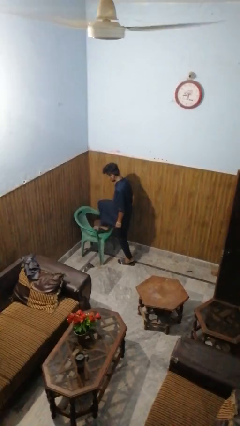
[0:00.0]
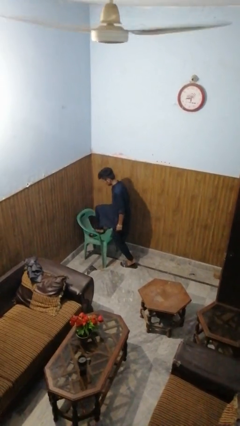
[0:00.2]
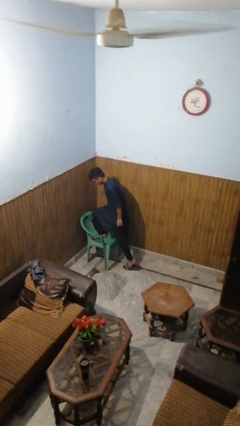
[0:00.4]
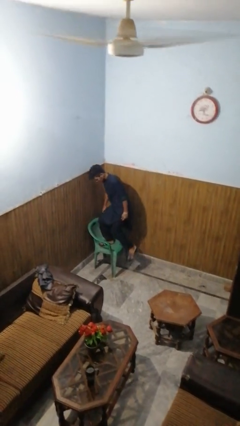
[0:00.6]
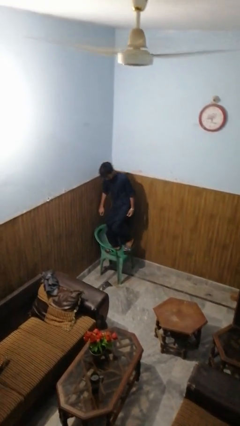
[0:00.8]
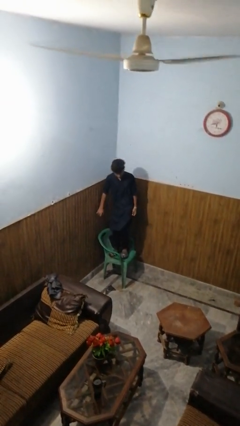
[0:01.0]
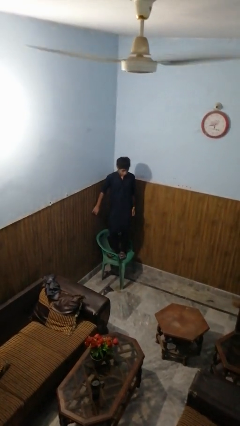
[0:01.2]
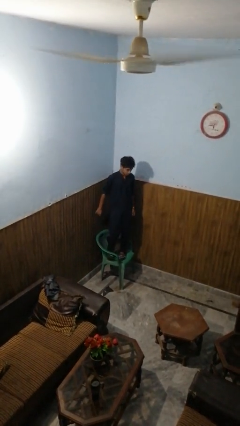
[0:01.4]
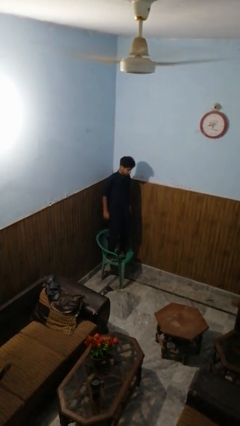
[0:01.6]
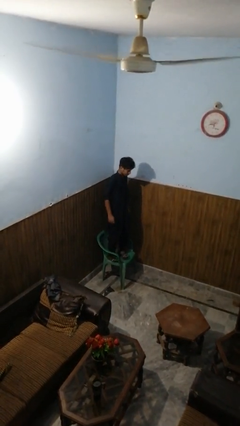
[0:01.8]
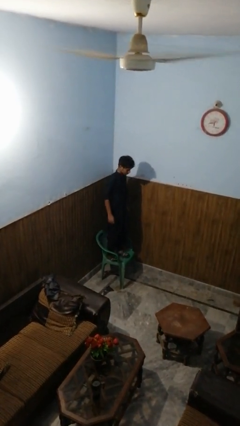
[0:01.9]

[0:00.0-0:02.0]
person climbs on chair

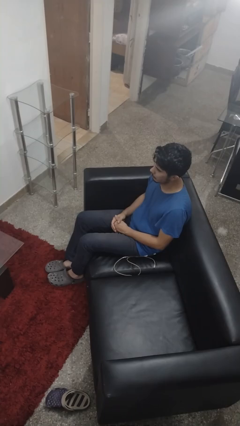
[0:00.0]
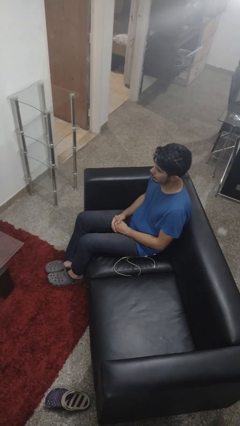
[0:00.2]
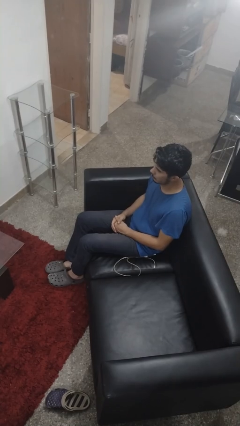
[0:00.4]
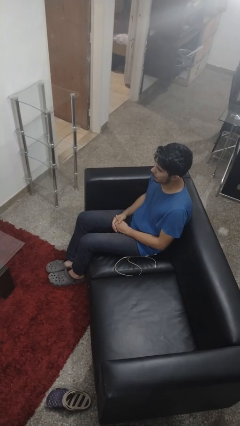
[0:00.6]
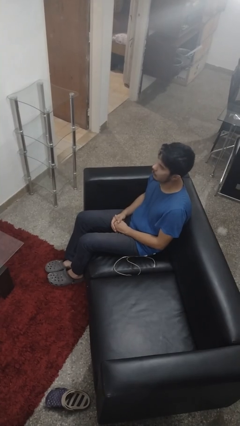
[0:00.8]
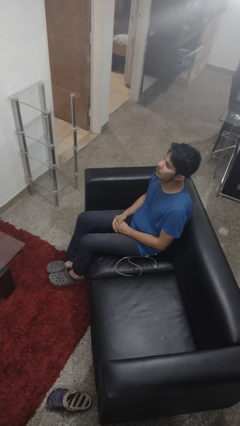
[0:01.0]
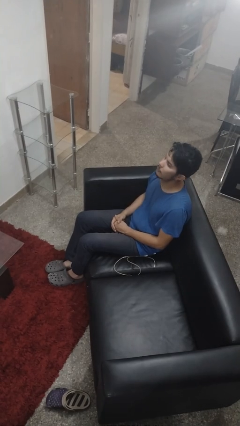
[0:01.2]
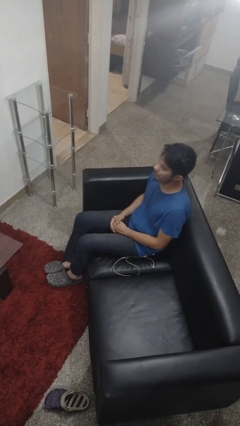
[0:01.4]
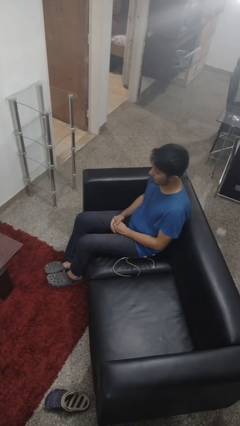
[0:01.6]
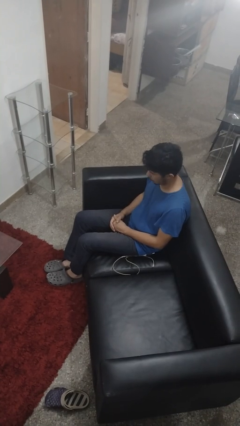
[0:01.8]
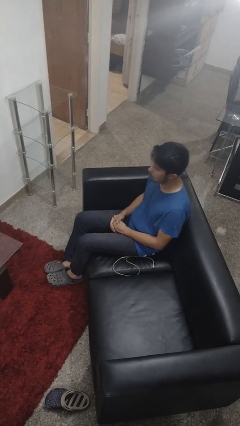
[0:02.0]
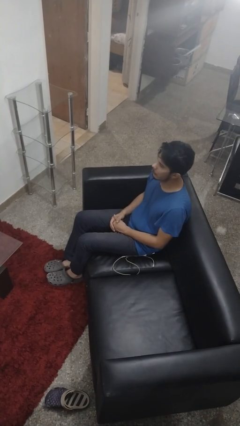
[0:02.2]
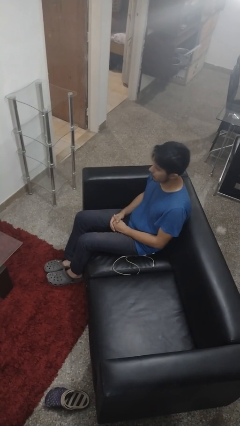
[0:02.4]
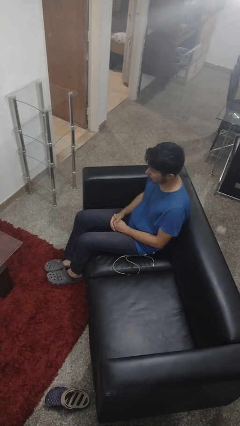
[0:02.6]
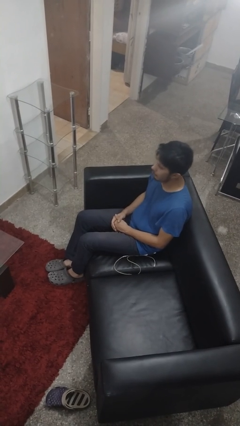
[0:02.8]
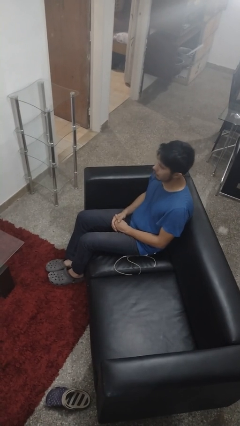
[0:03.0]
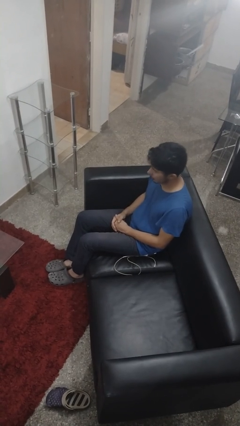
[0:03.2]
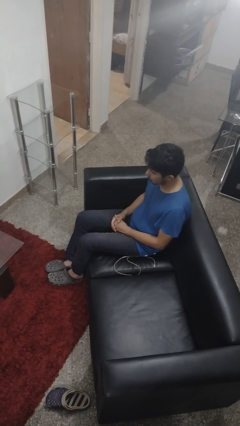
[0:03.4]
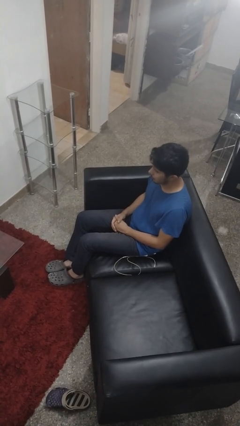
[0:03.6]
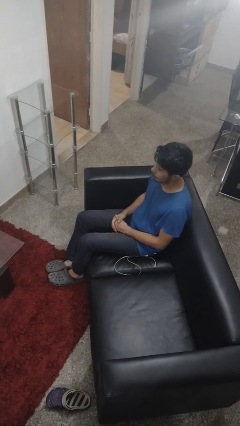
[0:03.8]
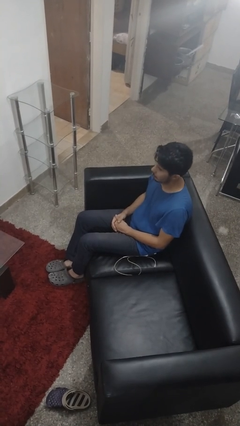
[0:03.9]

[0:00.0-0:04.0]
person nods head

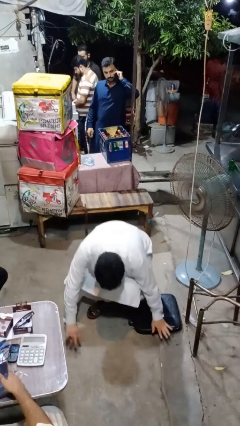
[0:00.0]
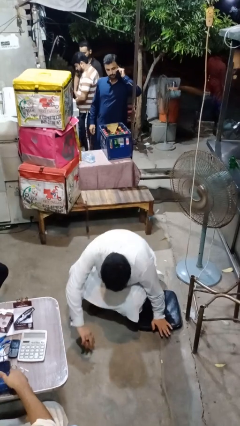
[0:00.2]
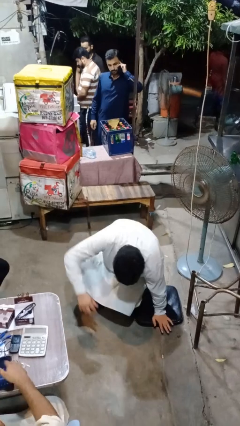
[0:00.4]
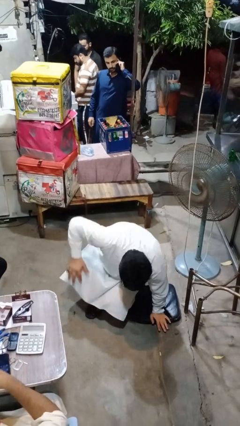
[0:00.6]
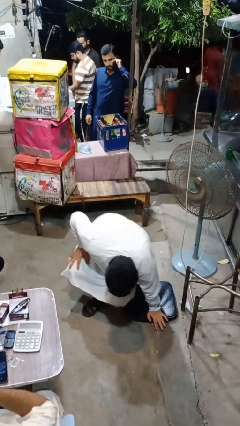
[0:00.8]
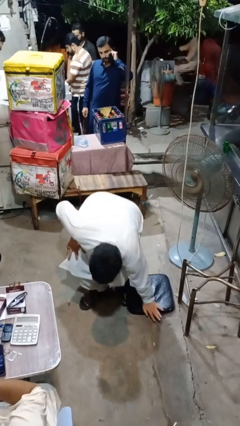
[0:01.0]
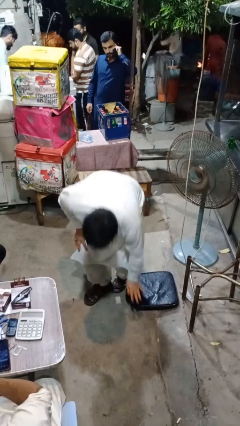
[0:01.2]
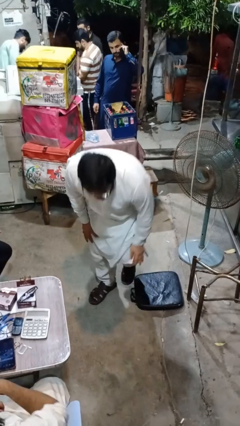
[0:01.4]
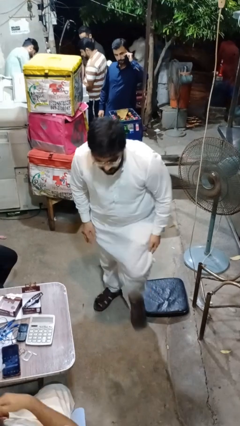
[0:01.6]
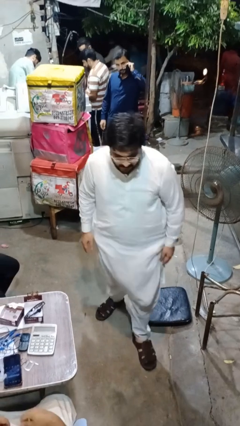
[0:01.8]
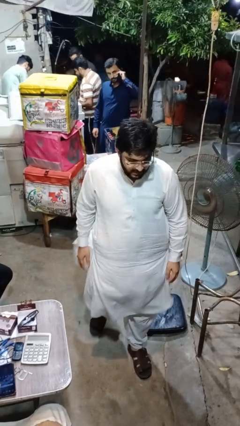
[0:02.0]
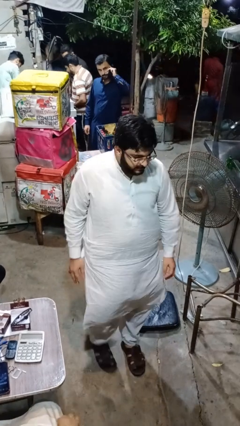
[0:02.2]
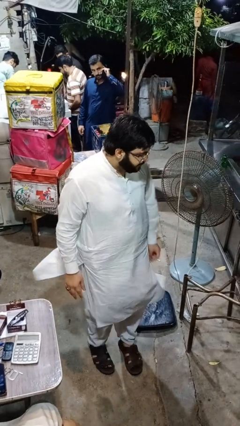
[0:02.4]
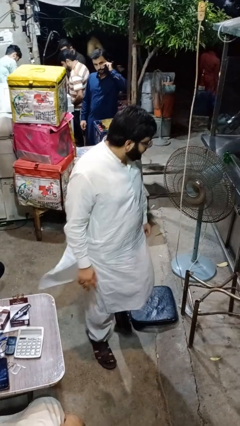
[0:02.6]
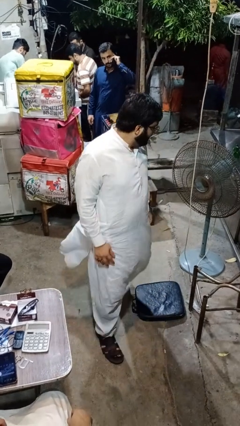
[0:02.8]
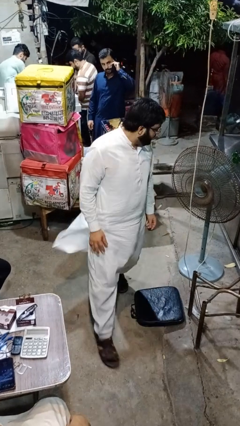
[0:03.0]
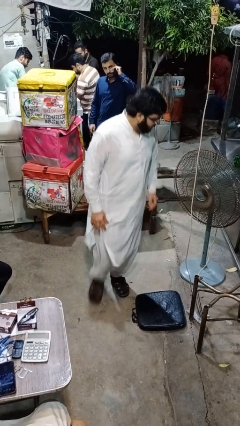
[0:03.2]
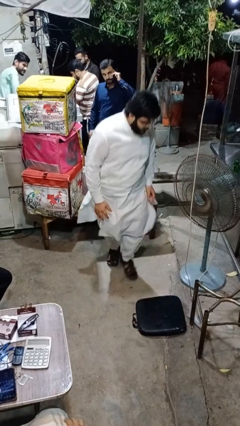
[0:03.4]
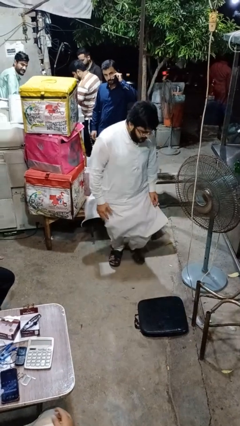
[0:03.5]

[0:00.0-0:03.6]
person stands up from floor

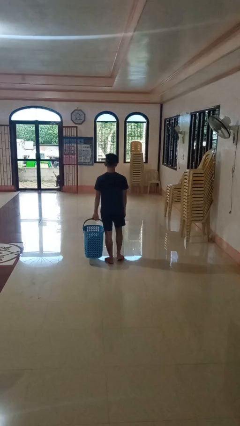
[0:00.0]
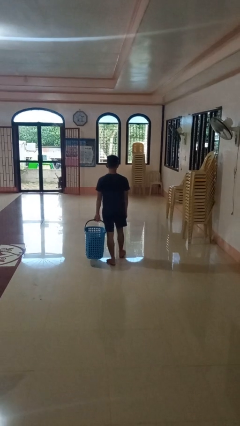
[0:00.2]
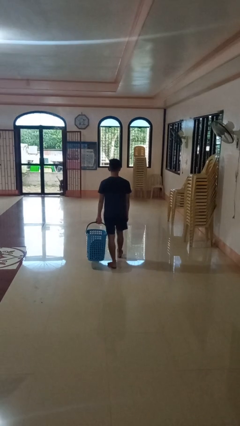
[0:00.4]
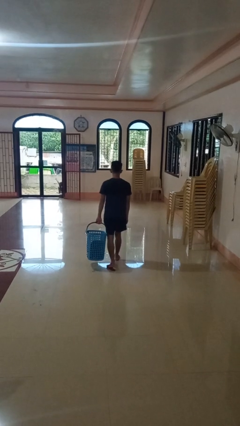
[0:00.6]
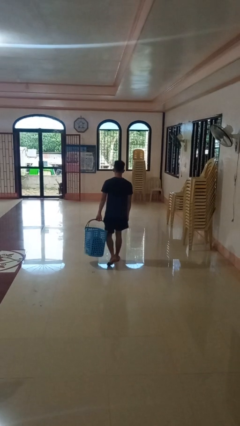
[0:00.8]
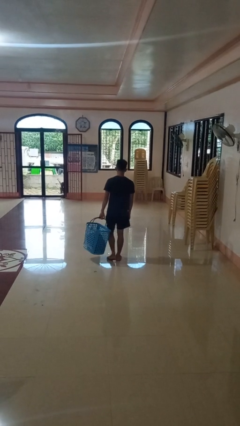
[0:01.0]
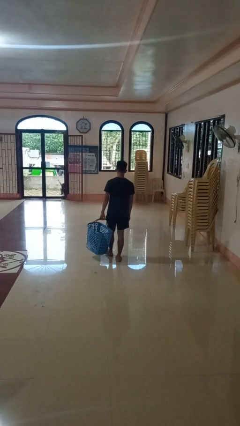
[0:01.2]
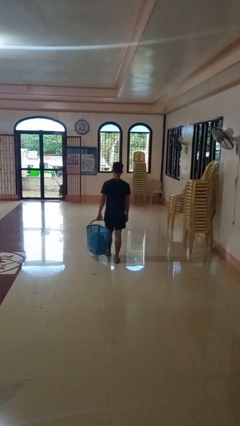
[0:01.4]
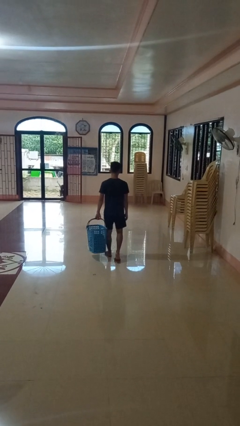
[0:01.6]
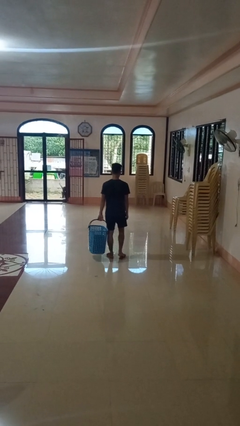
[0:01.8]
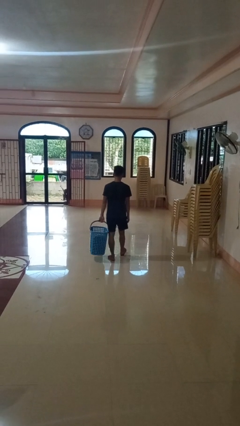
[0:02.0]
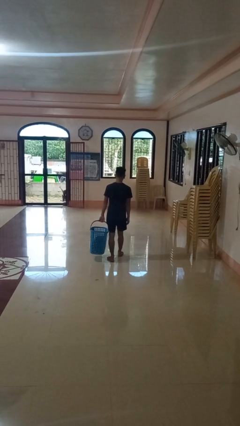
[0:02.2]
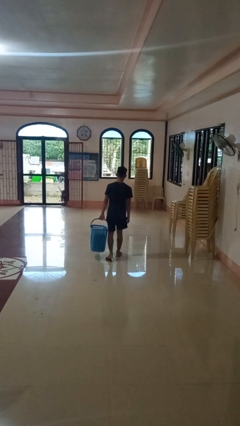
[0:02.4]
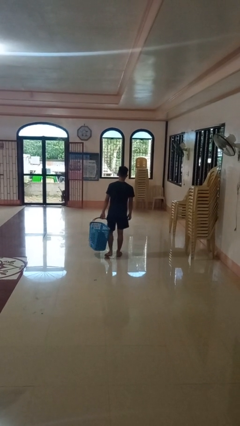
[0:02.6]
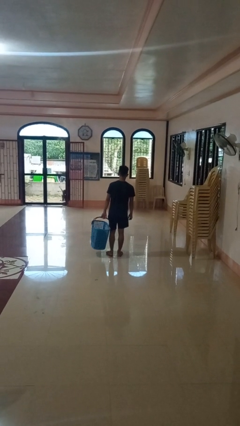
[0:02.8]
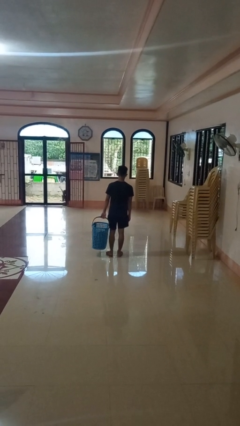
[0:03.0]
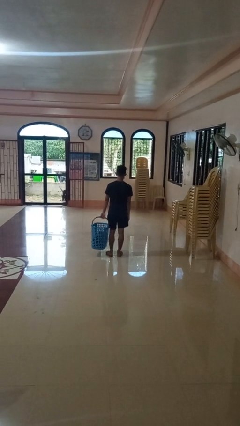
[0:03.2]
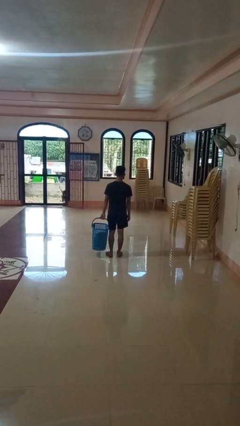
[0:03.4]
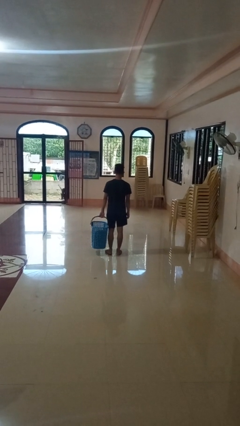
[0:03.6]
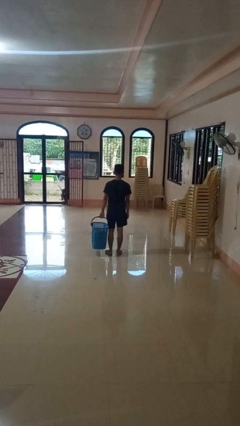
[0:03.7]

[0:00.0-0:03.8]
person carries laundry basket

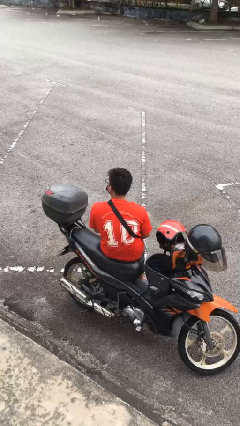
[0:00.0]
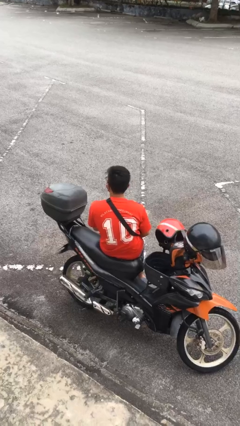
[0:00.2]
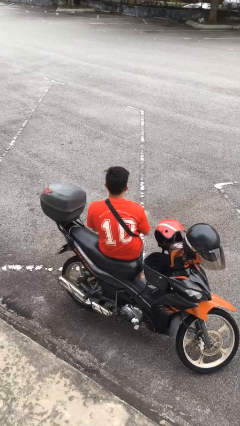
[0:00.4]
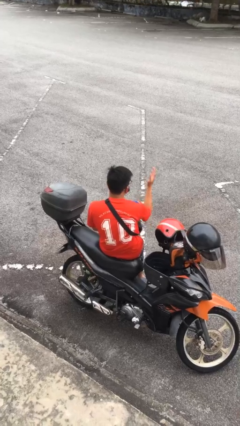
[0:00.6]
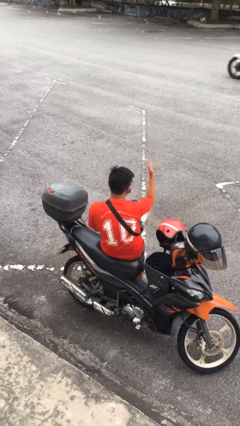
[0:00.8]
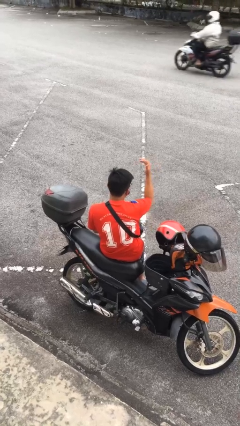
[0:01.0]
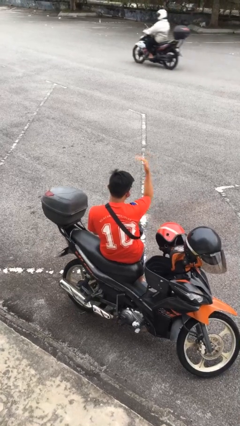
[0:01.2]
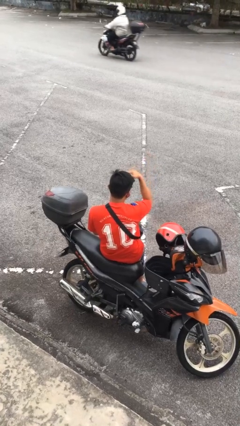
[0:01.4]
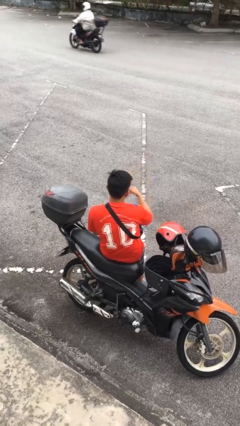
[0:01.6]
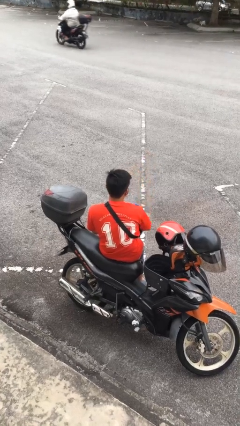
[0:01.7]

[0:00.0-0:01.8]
person gestures come here

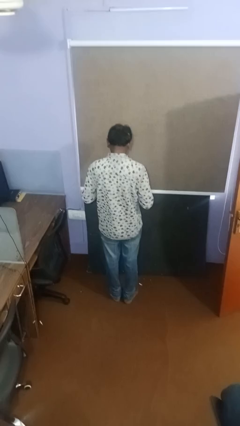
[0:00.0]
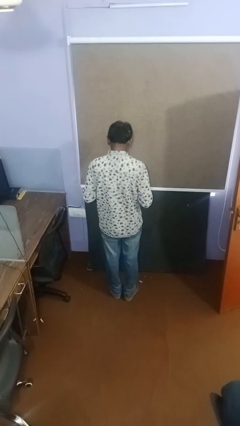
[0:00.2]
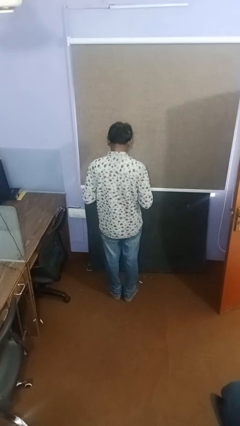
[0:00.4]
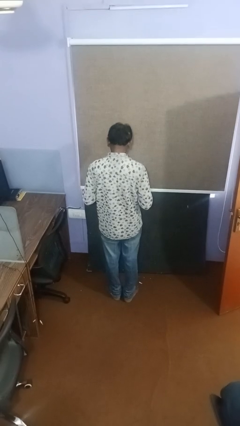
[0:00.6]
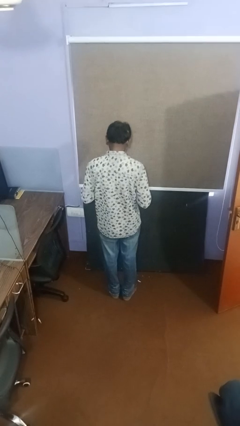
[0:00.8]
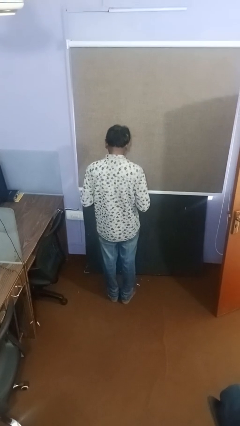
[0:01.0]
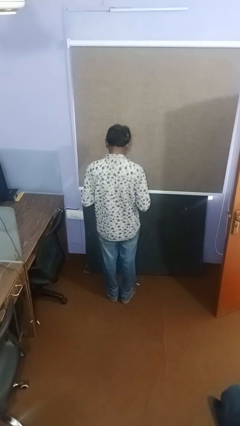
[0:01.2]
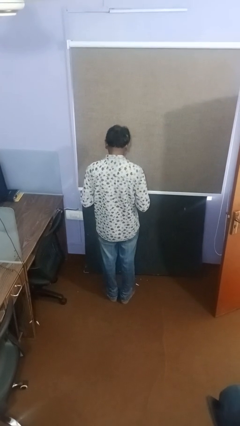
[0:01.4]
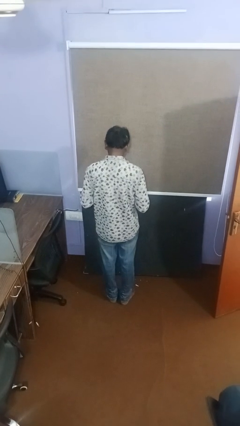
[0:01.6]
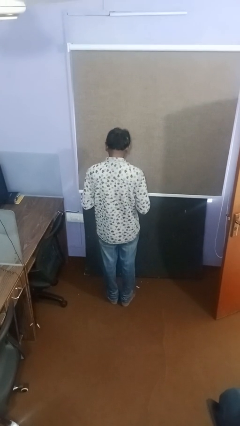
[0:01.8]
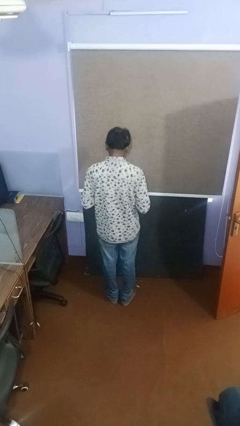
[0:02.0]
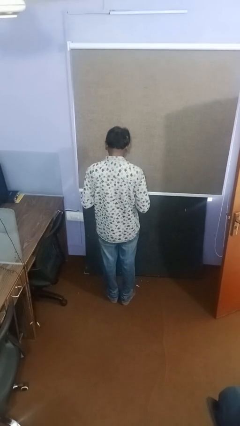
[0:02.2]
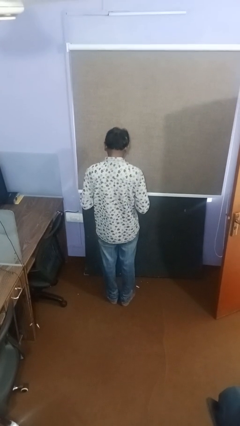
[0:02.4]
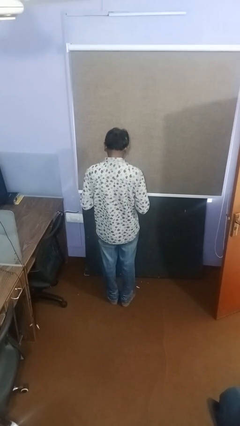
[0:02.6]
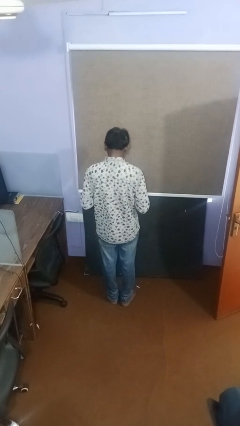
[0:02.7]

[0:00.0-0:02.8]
person gestures swipe down
